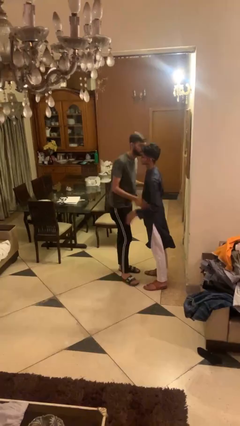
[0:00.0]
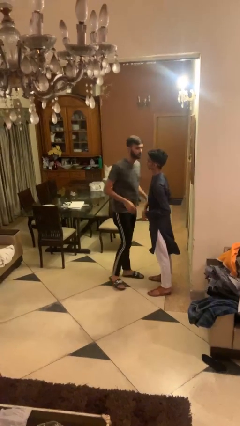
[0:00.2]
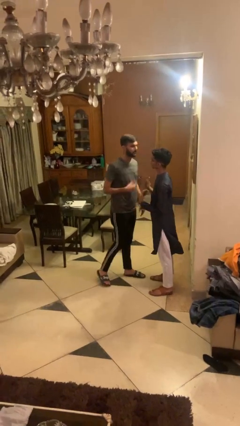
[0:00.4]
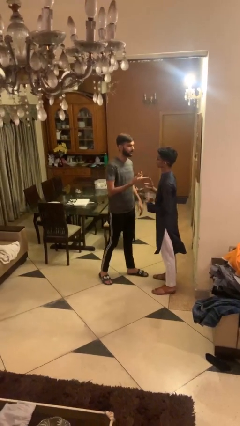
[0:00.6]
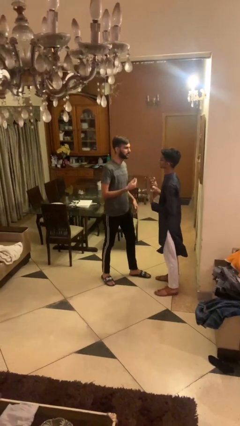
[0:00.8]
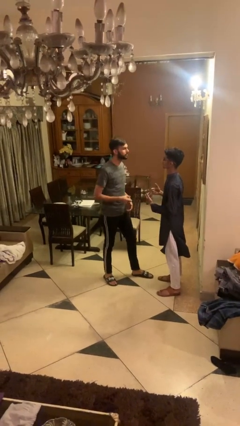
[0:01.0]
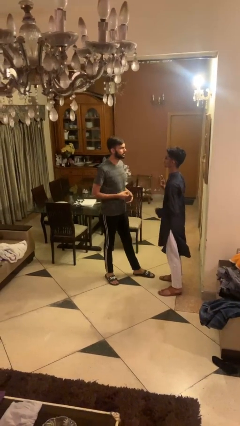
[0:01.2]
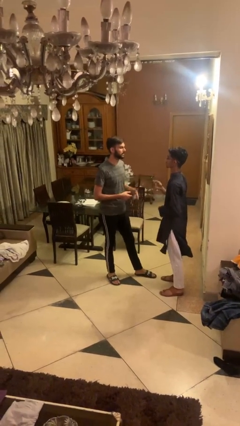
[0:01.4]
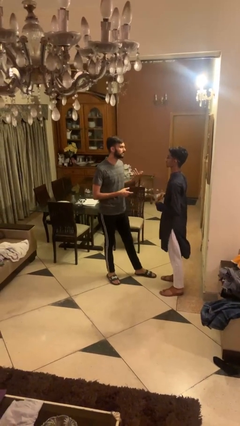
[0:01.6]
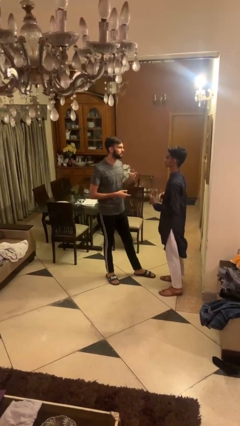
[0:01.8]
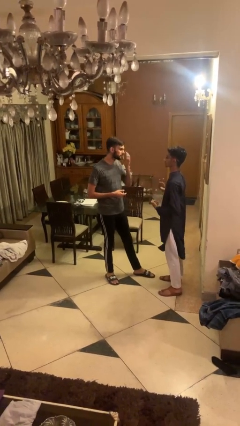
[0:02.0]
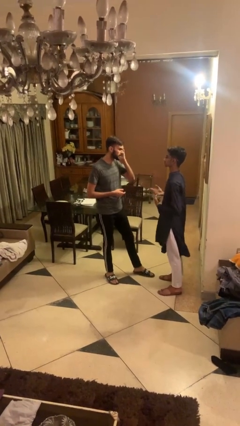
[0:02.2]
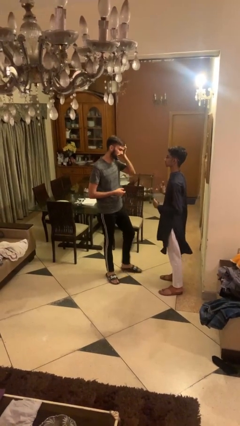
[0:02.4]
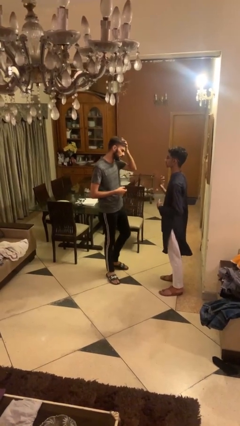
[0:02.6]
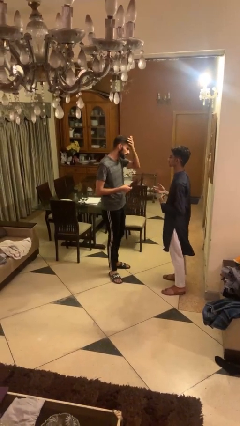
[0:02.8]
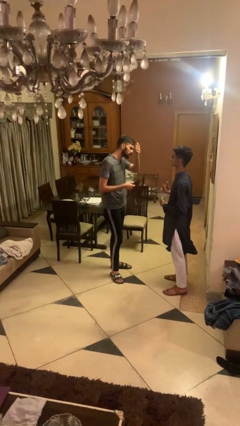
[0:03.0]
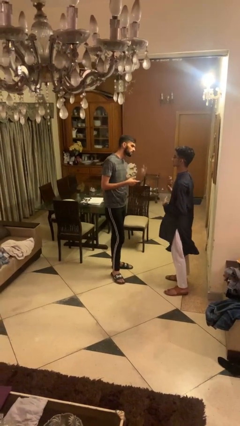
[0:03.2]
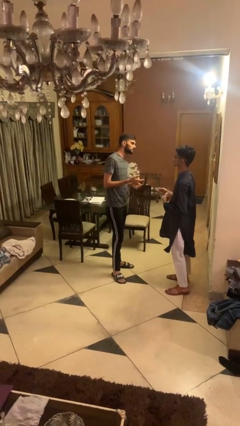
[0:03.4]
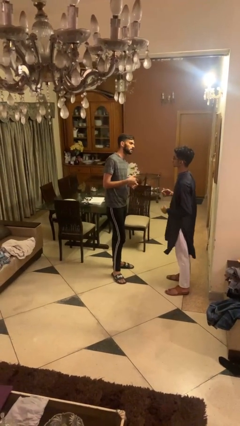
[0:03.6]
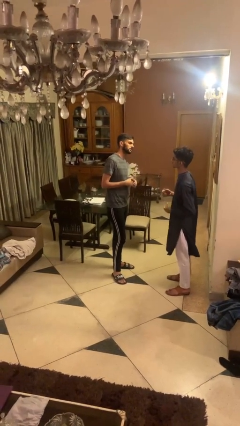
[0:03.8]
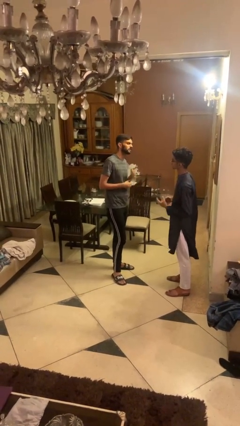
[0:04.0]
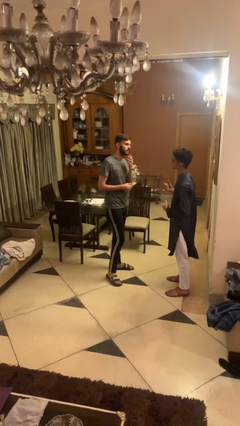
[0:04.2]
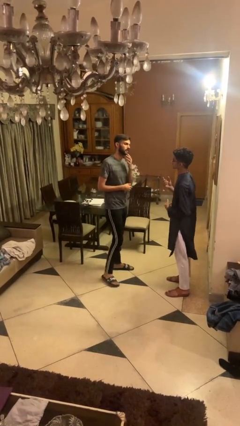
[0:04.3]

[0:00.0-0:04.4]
person talks to person

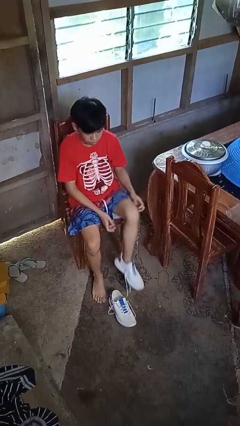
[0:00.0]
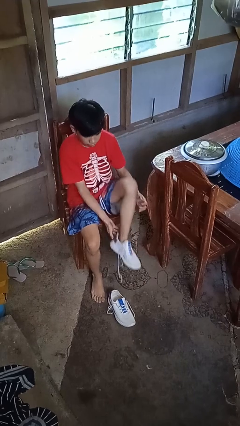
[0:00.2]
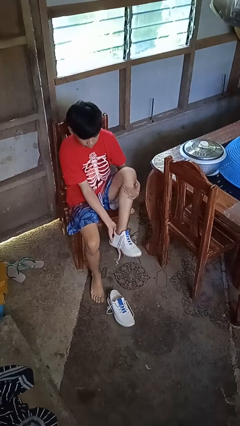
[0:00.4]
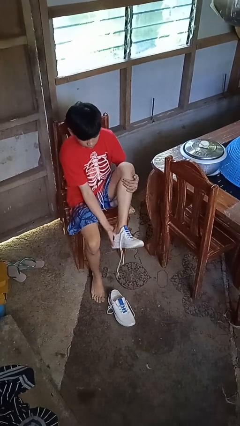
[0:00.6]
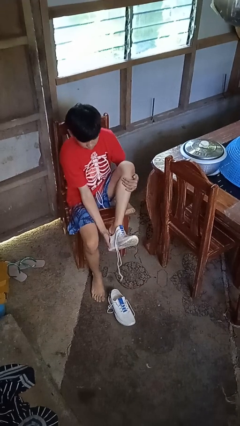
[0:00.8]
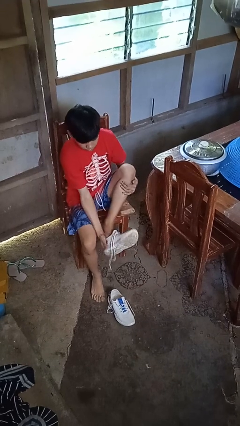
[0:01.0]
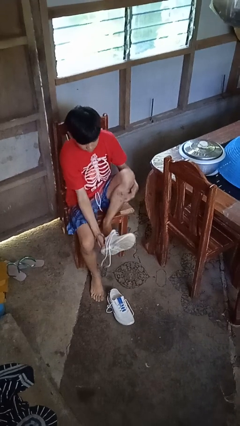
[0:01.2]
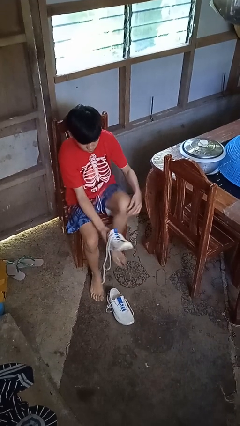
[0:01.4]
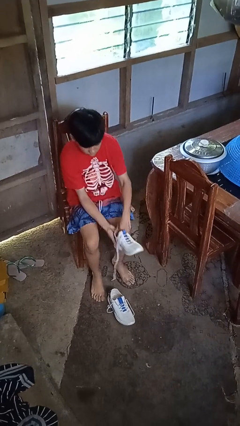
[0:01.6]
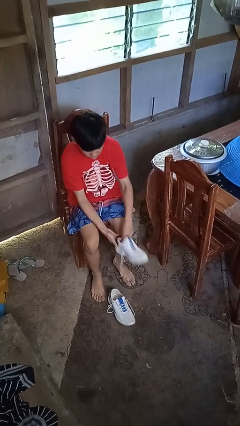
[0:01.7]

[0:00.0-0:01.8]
person takes off shoes

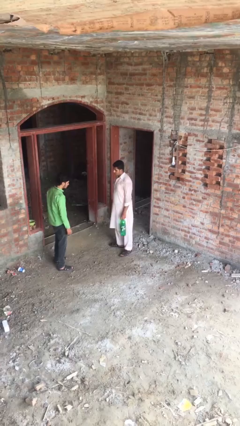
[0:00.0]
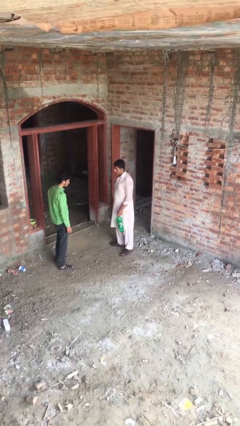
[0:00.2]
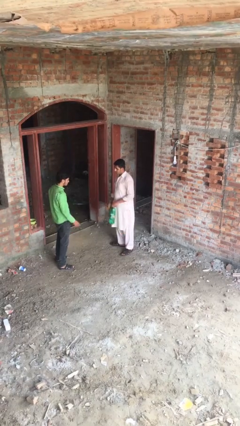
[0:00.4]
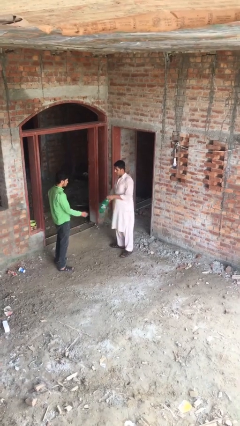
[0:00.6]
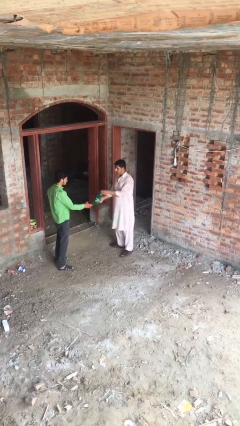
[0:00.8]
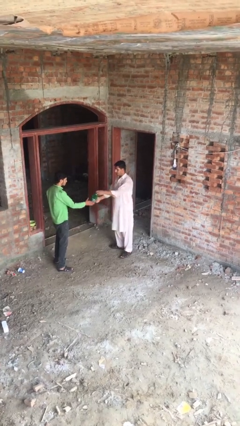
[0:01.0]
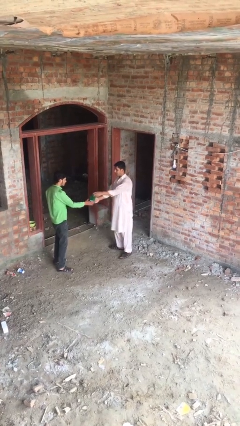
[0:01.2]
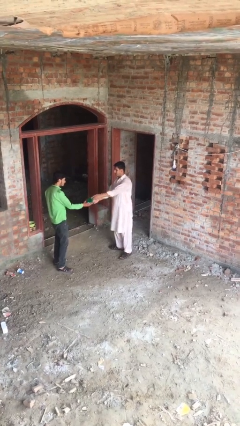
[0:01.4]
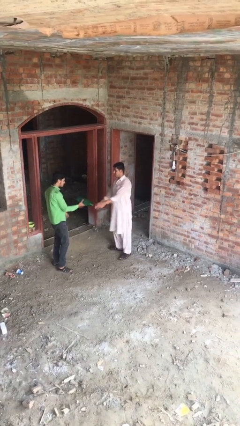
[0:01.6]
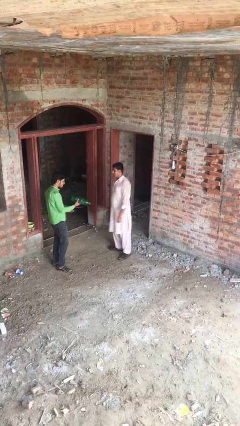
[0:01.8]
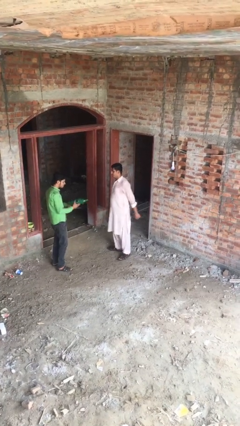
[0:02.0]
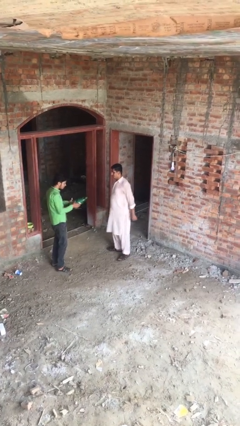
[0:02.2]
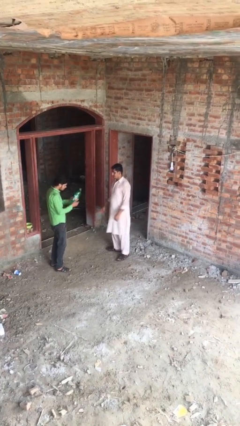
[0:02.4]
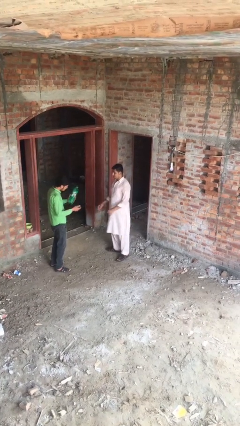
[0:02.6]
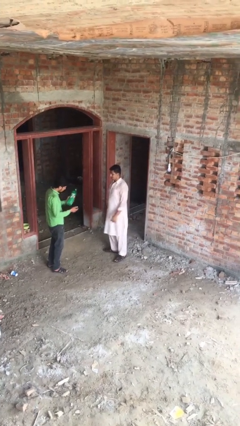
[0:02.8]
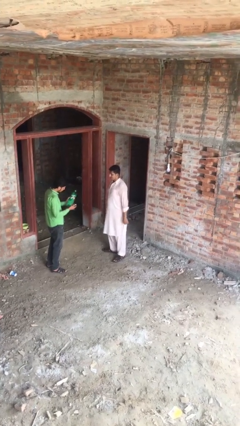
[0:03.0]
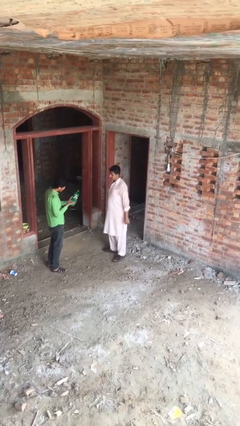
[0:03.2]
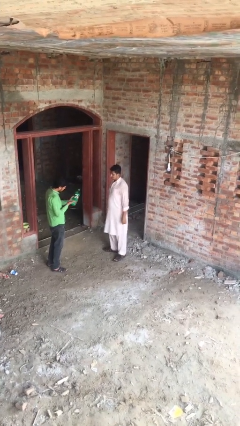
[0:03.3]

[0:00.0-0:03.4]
person transfers object to person

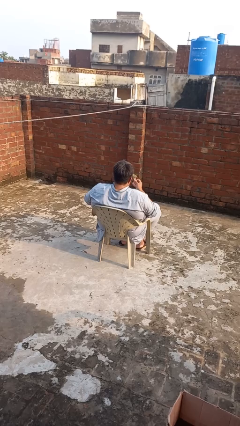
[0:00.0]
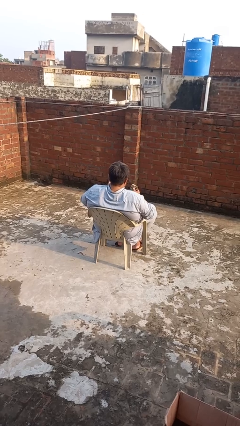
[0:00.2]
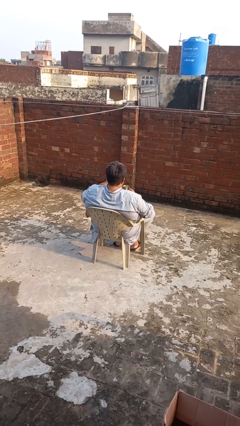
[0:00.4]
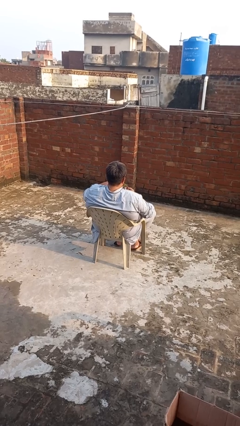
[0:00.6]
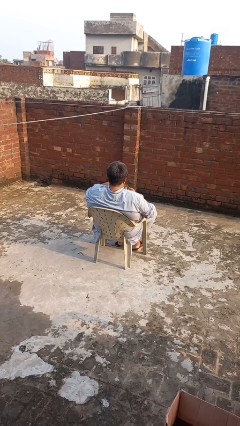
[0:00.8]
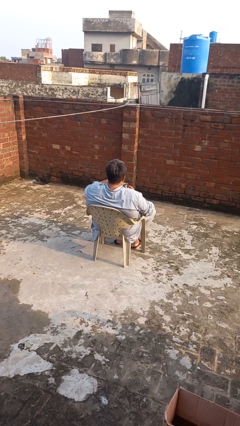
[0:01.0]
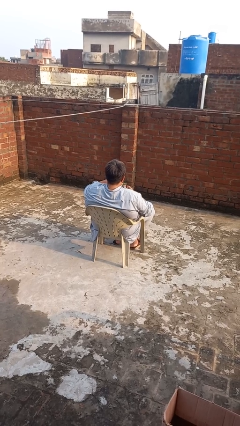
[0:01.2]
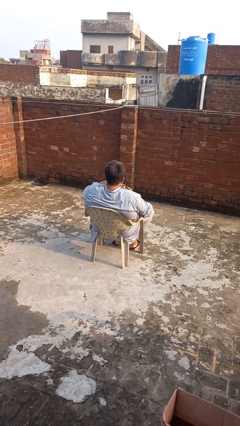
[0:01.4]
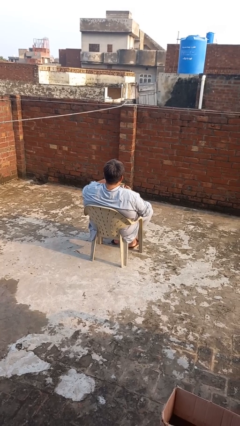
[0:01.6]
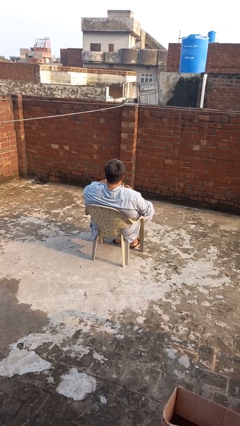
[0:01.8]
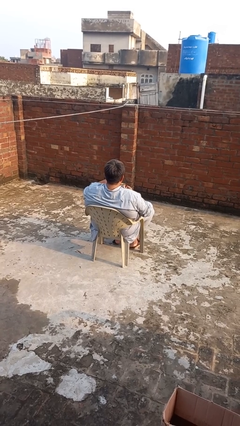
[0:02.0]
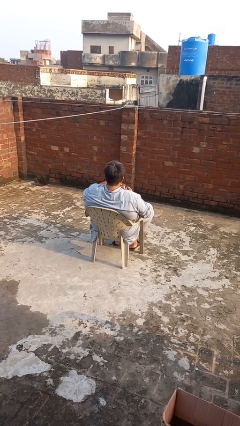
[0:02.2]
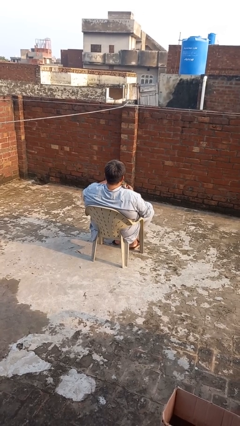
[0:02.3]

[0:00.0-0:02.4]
person stirs mug

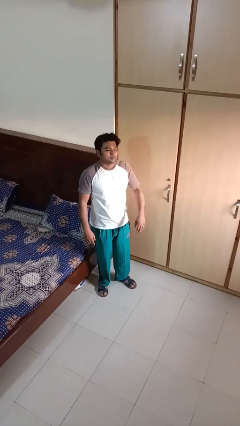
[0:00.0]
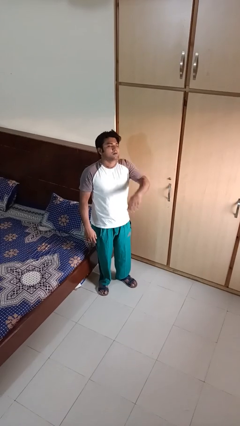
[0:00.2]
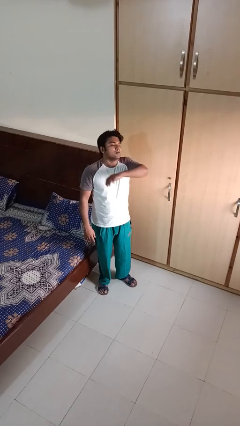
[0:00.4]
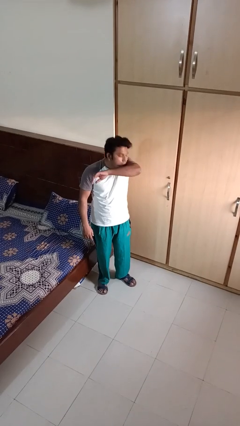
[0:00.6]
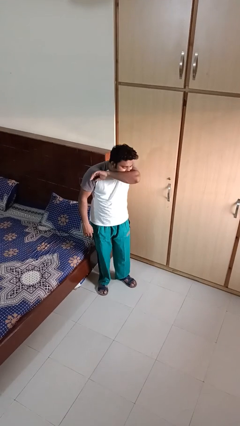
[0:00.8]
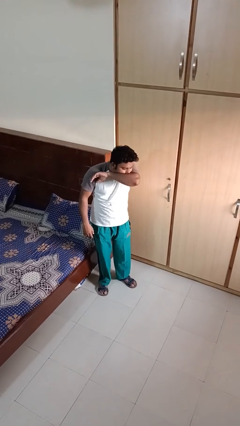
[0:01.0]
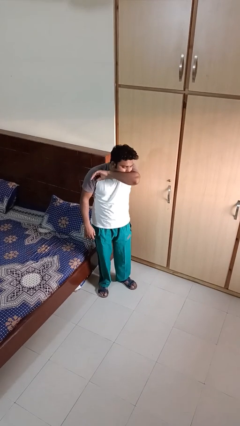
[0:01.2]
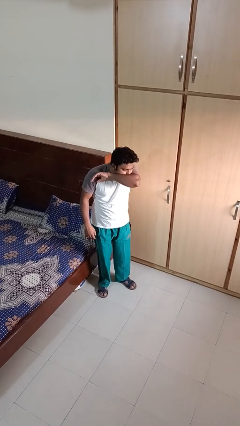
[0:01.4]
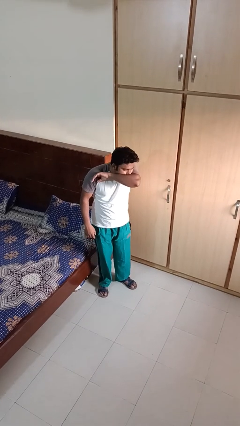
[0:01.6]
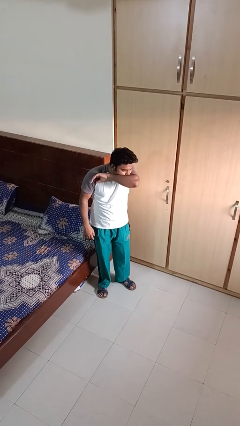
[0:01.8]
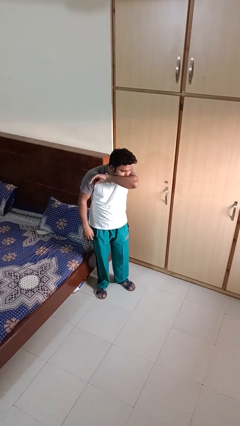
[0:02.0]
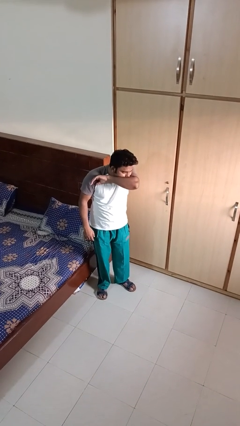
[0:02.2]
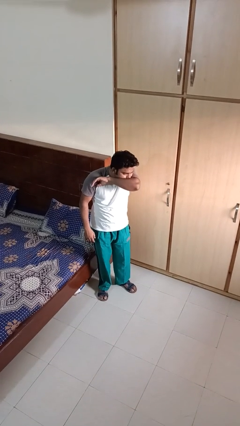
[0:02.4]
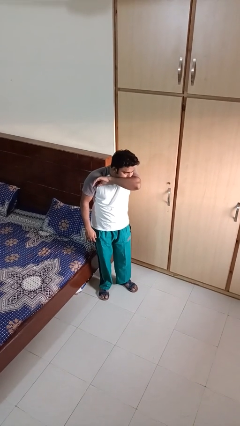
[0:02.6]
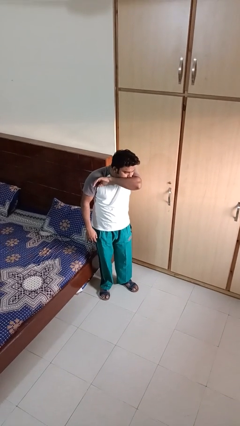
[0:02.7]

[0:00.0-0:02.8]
person sneezes into arm

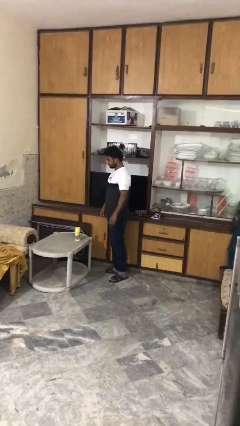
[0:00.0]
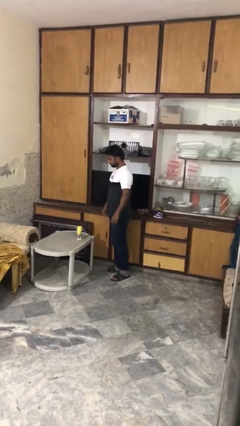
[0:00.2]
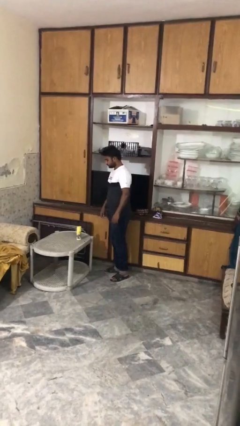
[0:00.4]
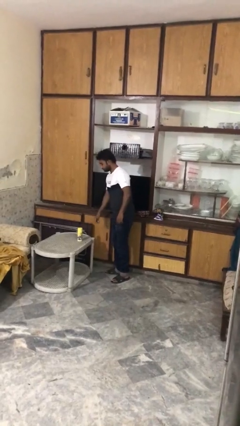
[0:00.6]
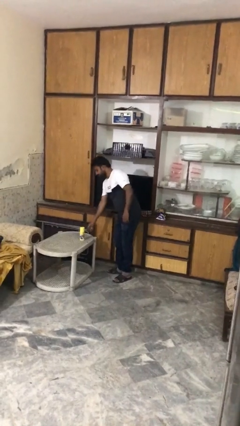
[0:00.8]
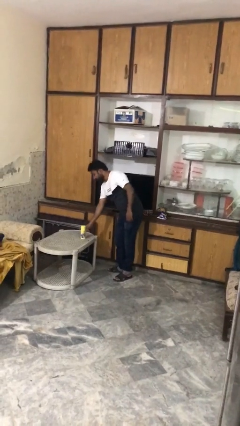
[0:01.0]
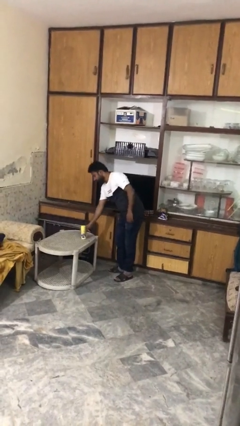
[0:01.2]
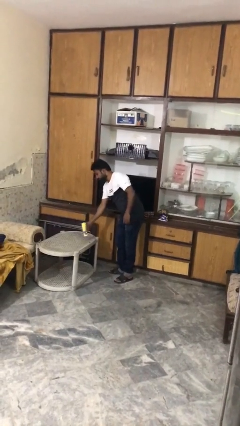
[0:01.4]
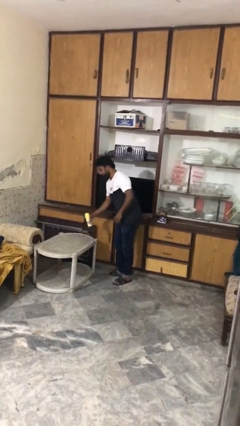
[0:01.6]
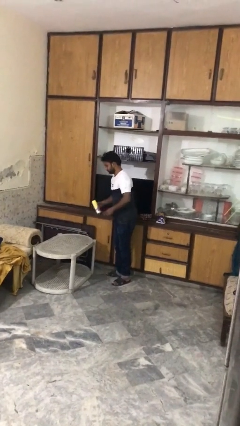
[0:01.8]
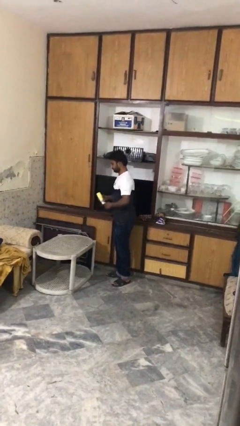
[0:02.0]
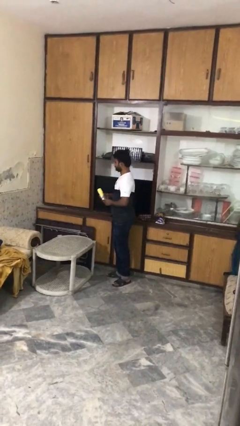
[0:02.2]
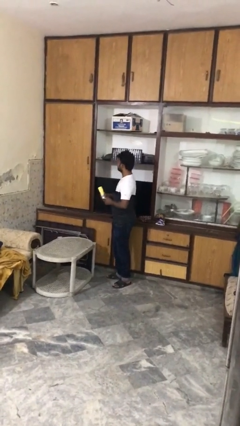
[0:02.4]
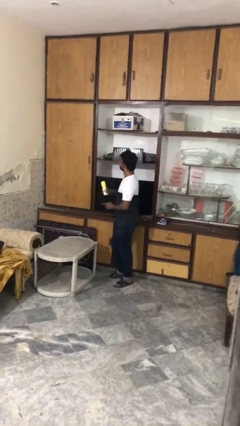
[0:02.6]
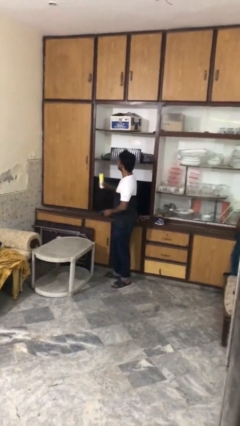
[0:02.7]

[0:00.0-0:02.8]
person picks up object from table
